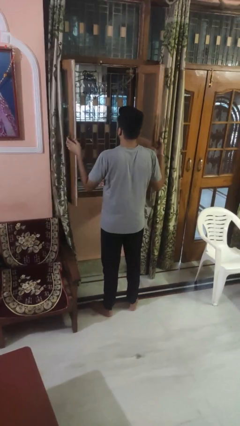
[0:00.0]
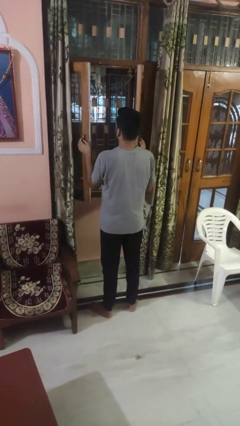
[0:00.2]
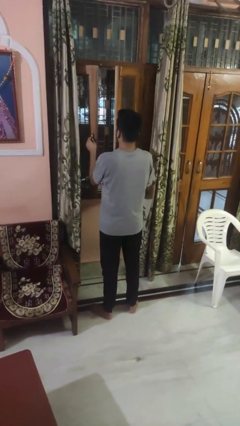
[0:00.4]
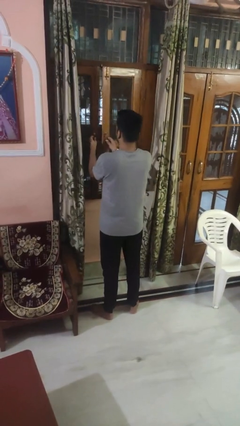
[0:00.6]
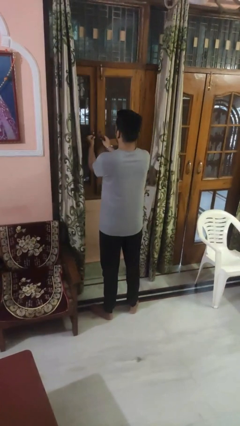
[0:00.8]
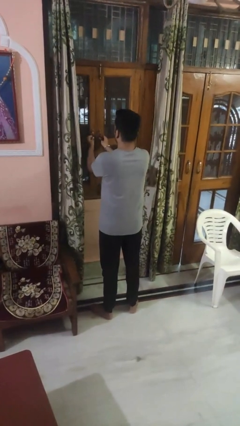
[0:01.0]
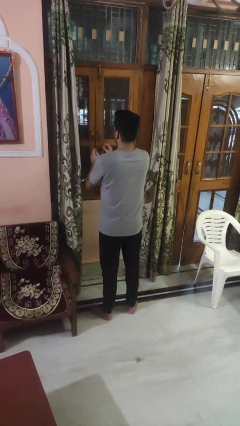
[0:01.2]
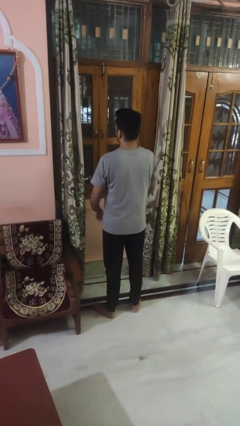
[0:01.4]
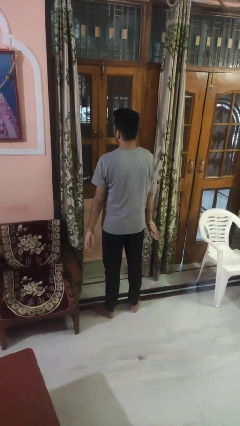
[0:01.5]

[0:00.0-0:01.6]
person closes home window

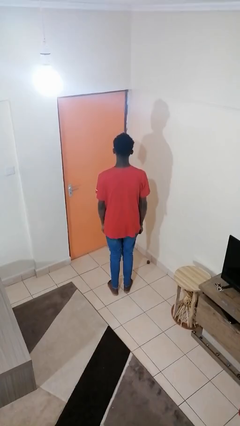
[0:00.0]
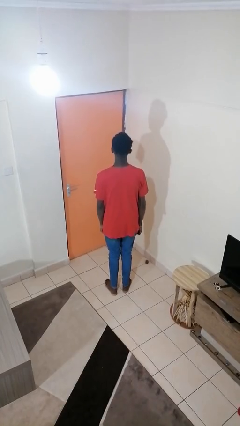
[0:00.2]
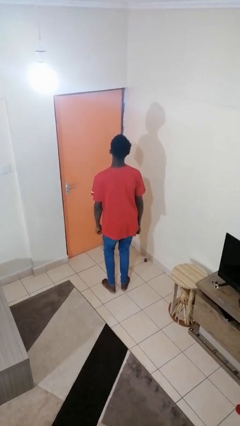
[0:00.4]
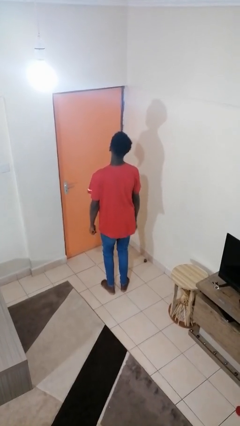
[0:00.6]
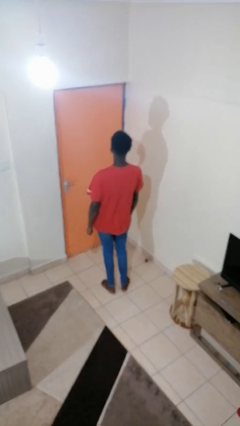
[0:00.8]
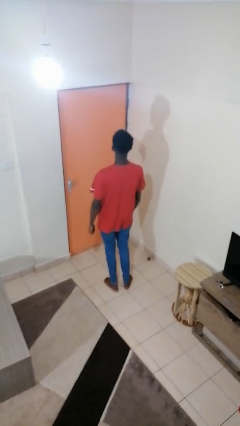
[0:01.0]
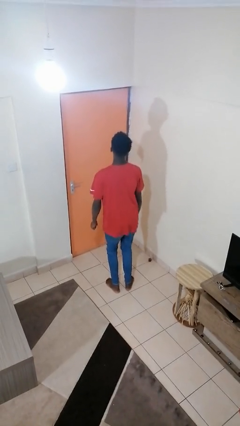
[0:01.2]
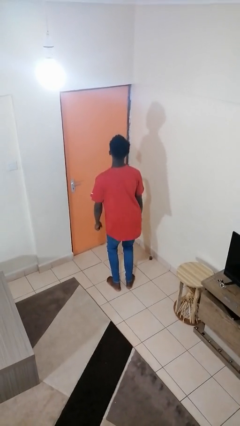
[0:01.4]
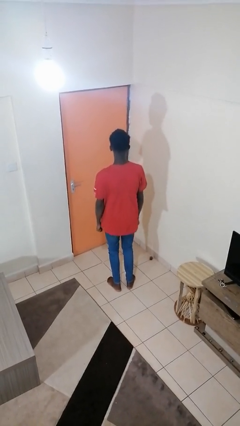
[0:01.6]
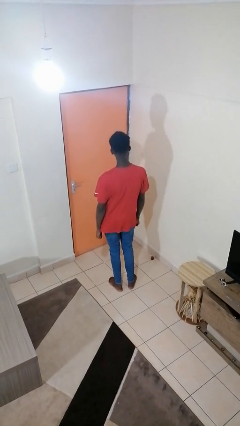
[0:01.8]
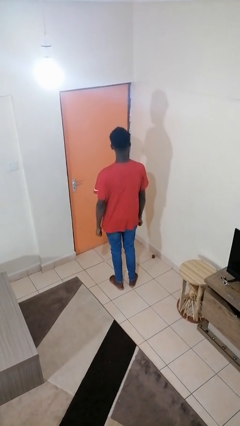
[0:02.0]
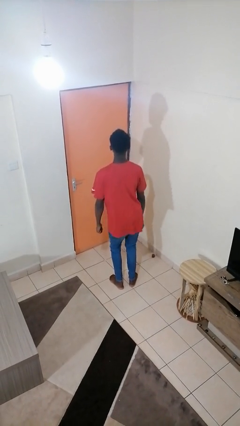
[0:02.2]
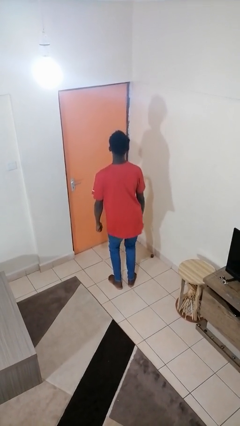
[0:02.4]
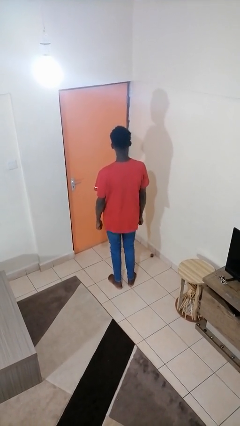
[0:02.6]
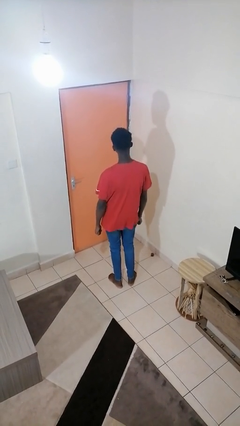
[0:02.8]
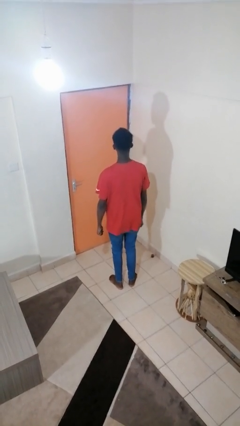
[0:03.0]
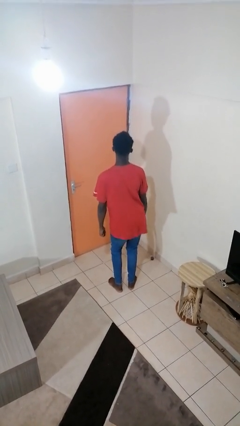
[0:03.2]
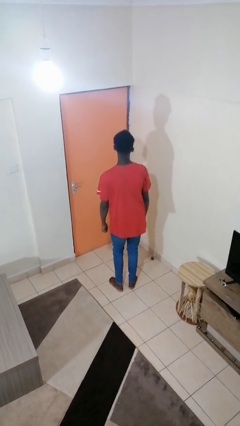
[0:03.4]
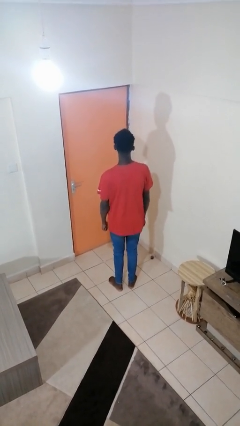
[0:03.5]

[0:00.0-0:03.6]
person wiggles hips

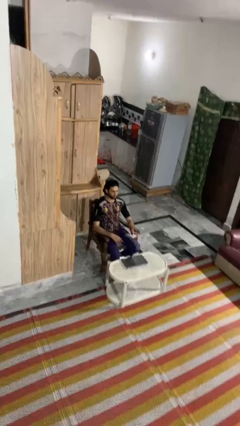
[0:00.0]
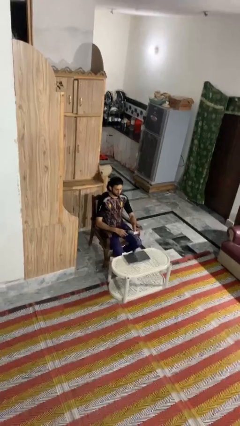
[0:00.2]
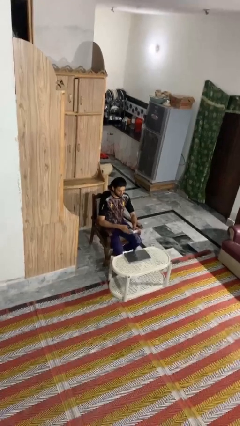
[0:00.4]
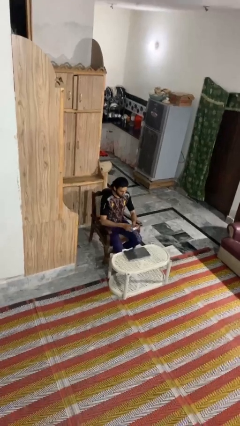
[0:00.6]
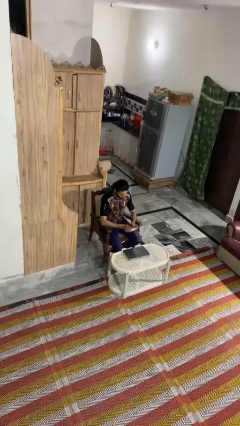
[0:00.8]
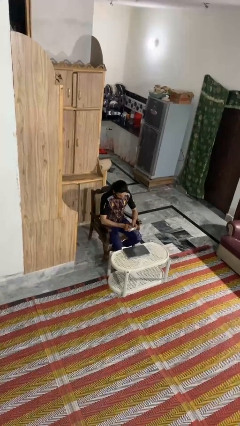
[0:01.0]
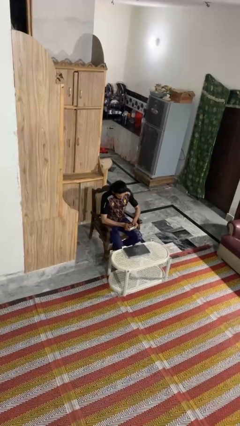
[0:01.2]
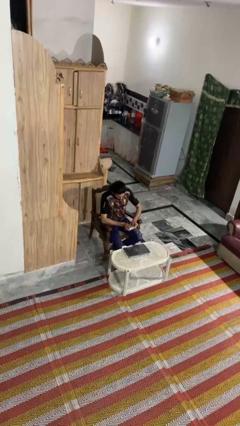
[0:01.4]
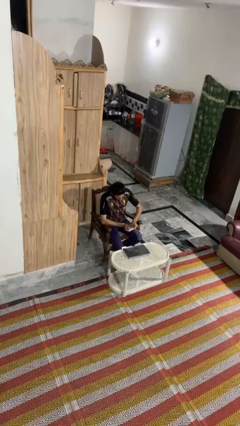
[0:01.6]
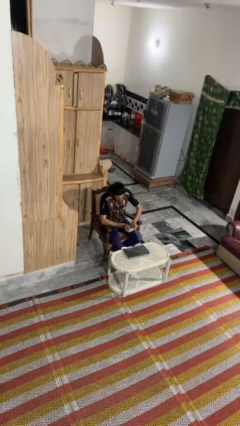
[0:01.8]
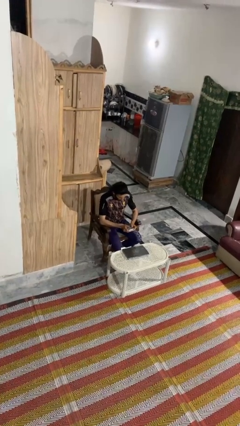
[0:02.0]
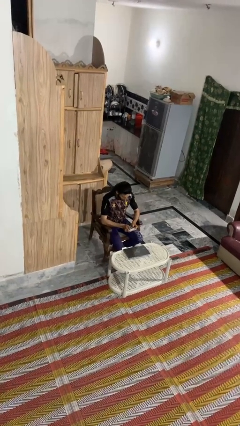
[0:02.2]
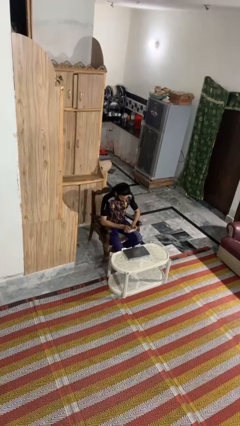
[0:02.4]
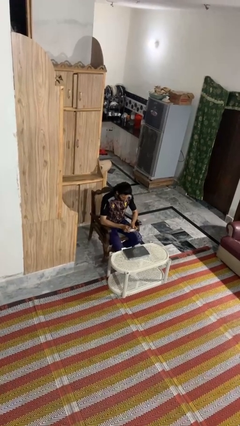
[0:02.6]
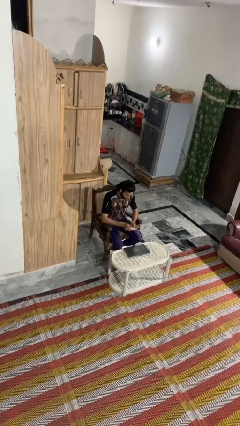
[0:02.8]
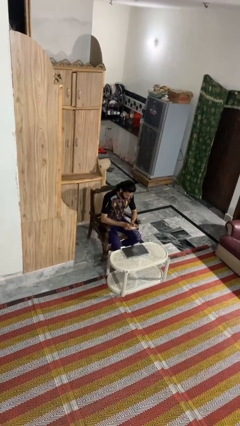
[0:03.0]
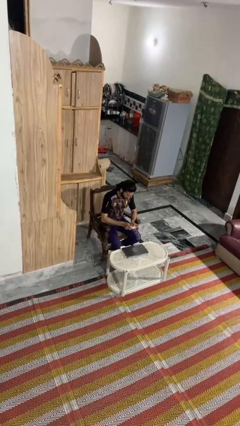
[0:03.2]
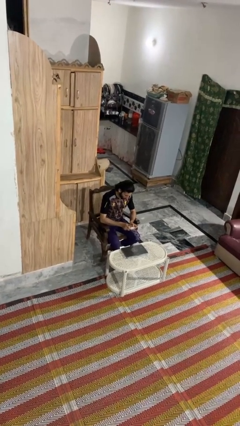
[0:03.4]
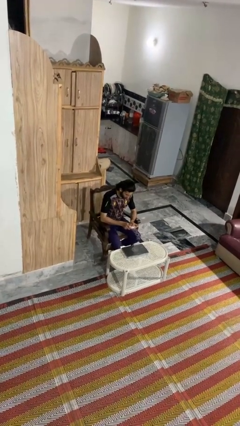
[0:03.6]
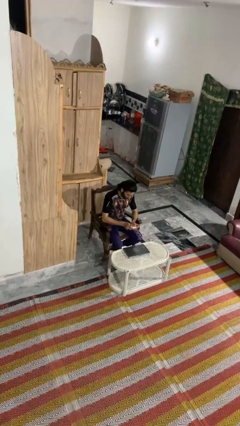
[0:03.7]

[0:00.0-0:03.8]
person interacts with handheld game

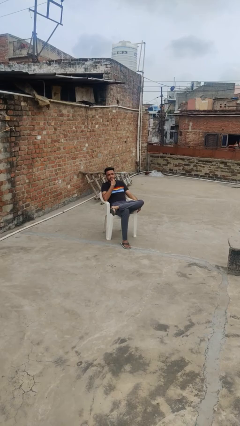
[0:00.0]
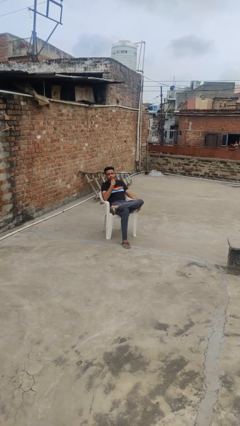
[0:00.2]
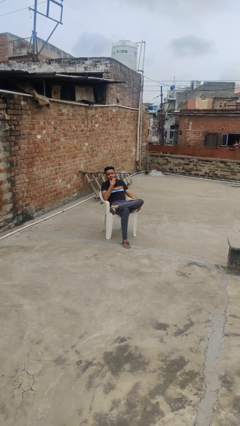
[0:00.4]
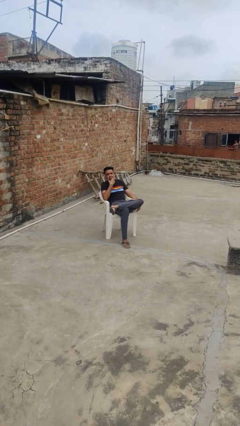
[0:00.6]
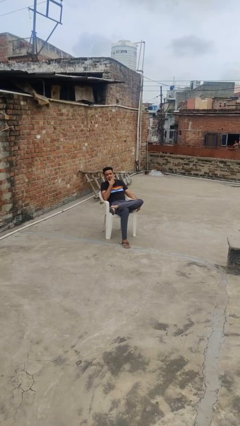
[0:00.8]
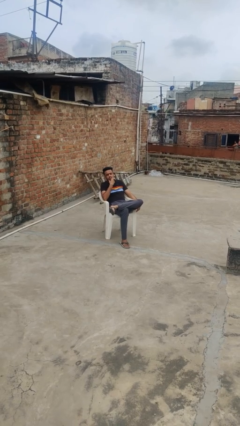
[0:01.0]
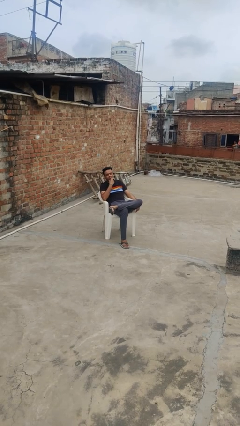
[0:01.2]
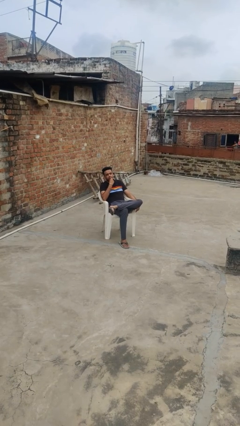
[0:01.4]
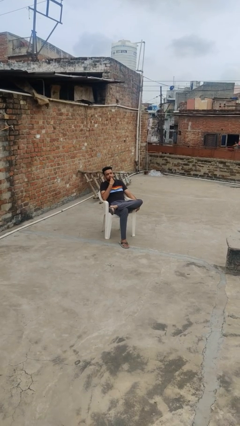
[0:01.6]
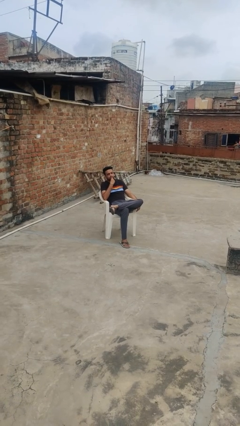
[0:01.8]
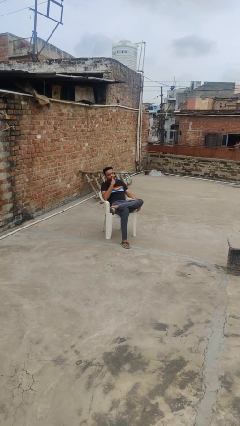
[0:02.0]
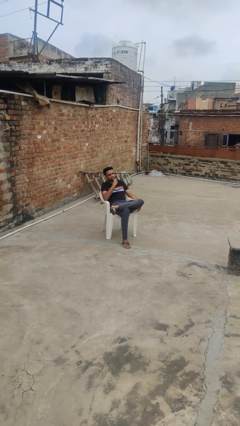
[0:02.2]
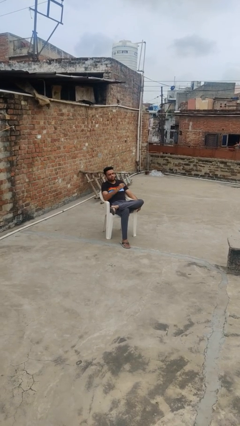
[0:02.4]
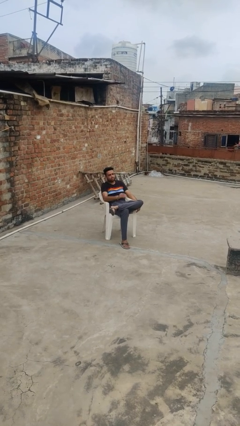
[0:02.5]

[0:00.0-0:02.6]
person strokes chin

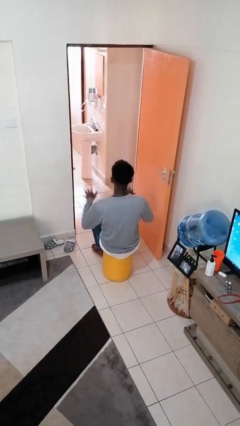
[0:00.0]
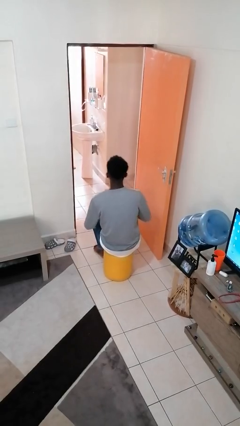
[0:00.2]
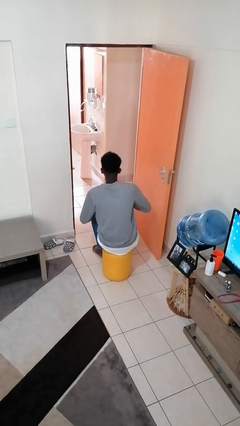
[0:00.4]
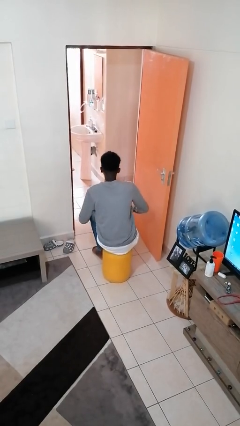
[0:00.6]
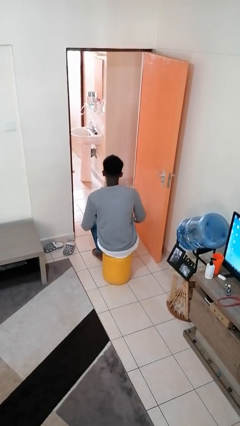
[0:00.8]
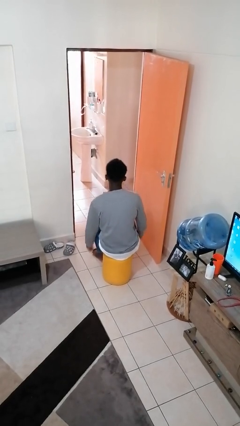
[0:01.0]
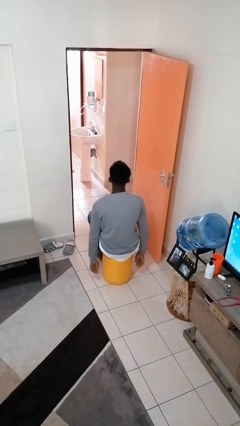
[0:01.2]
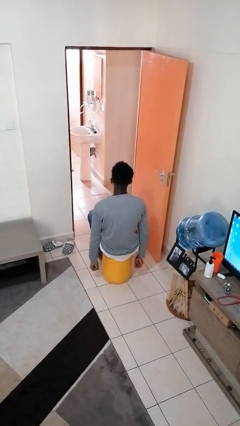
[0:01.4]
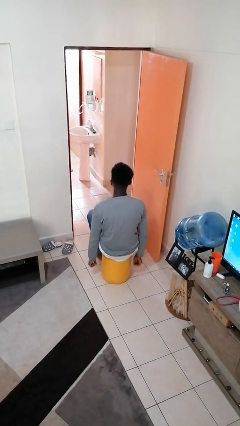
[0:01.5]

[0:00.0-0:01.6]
person slaps hands on thighs

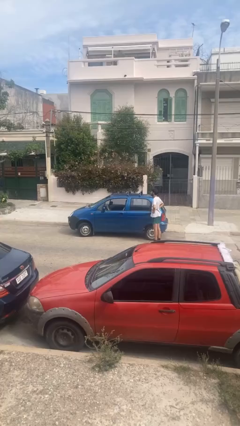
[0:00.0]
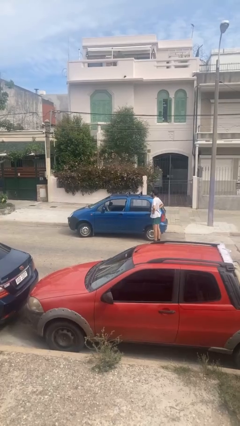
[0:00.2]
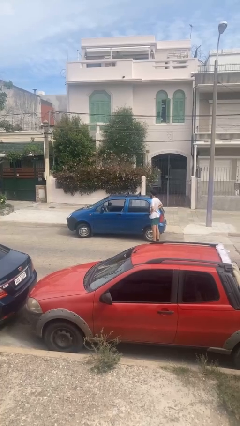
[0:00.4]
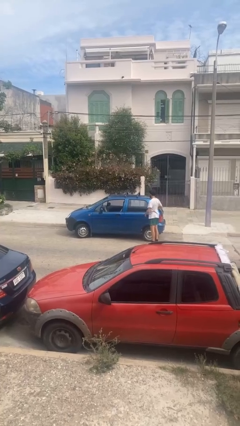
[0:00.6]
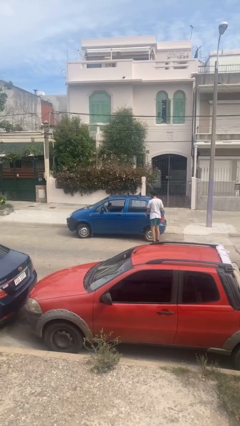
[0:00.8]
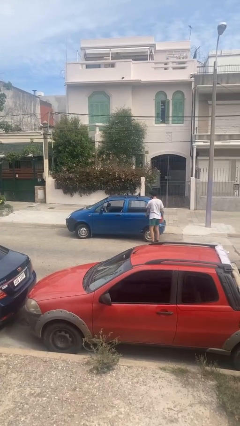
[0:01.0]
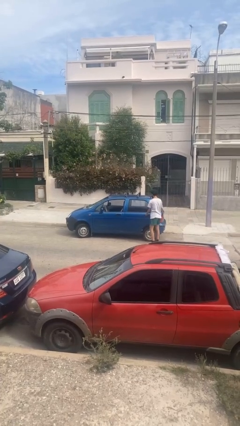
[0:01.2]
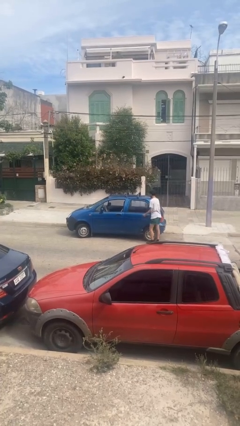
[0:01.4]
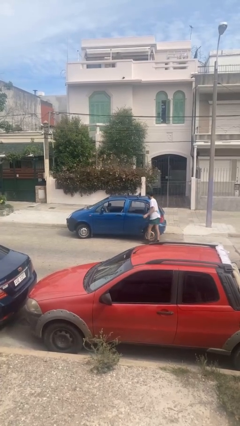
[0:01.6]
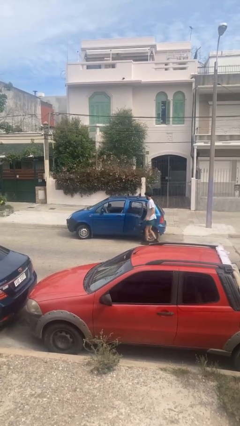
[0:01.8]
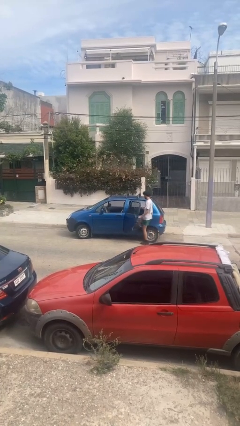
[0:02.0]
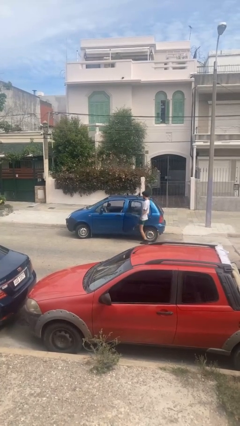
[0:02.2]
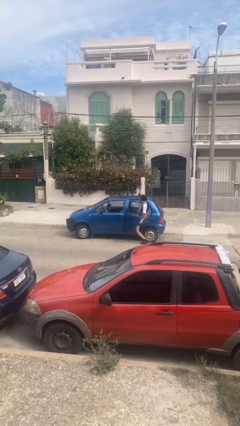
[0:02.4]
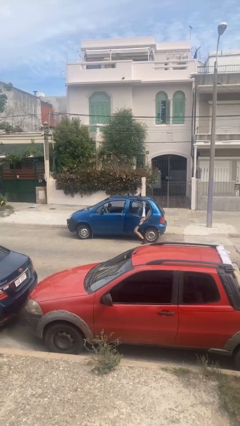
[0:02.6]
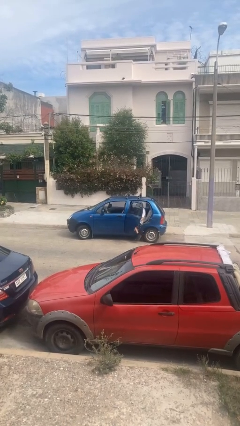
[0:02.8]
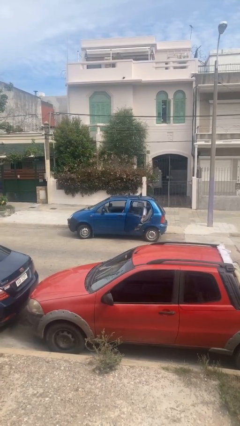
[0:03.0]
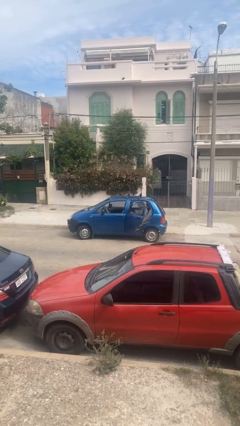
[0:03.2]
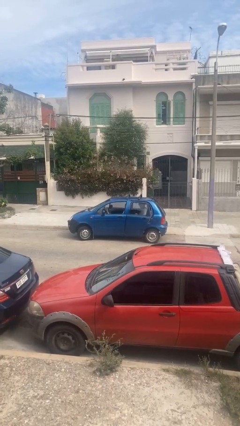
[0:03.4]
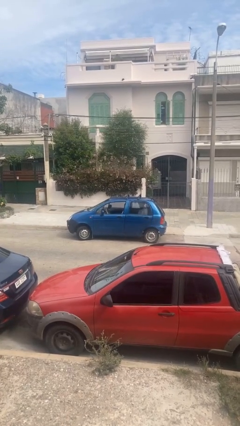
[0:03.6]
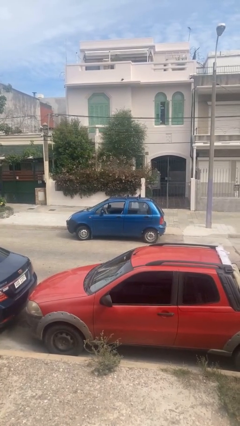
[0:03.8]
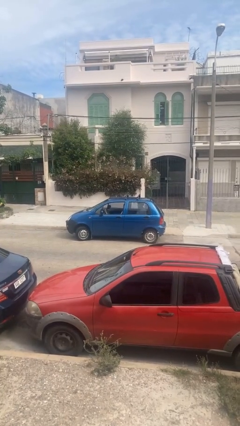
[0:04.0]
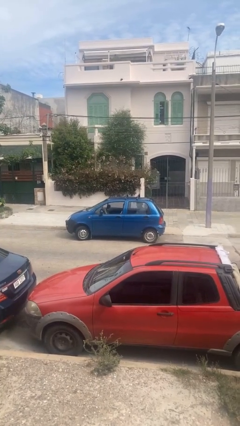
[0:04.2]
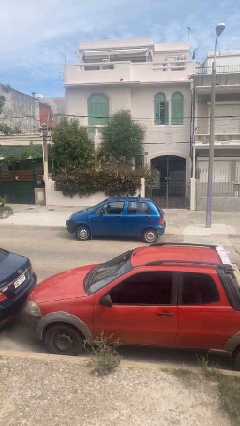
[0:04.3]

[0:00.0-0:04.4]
car picks up person
